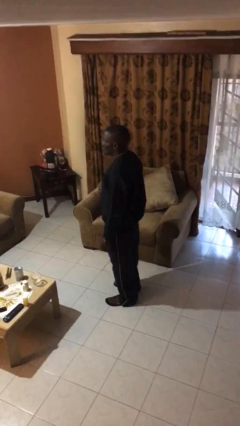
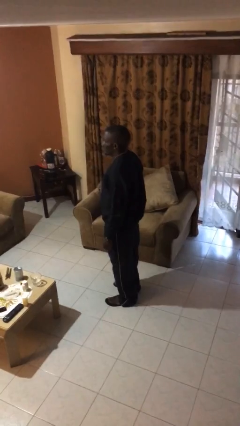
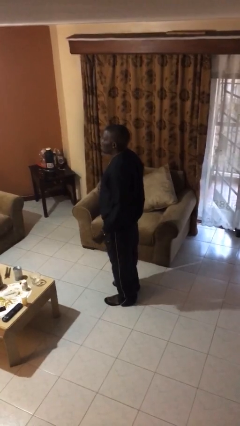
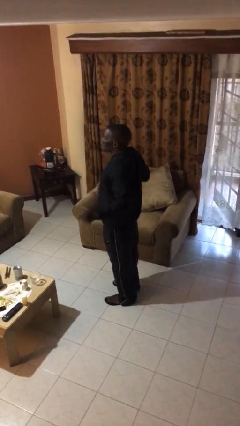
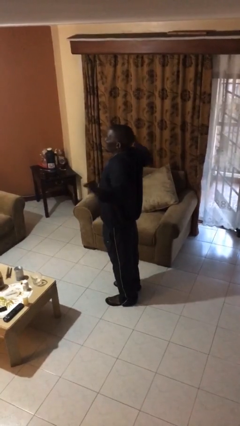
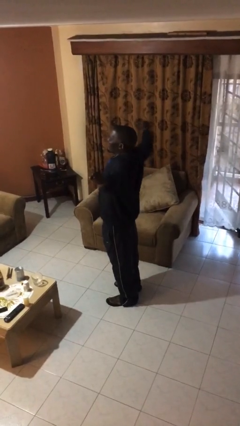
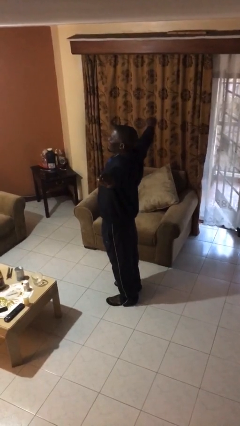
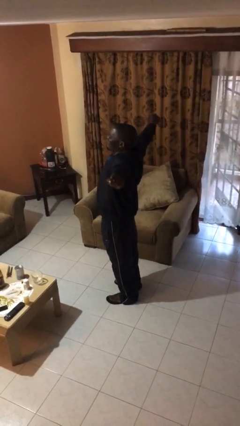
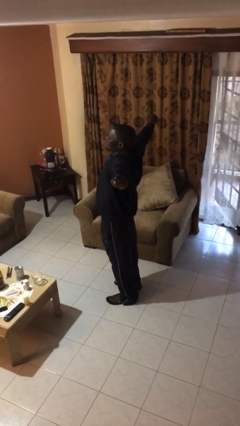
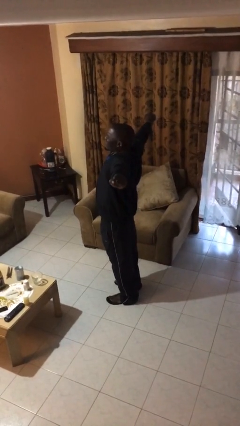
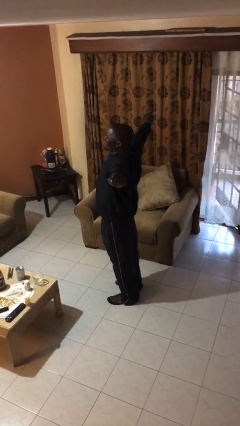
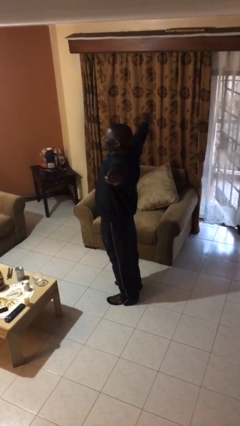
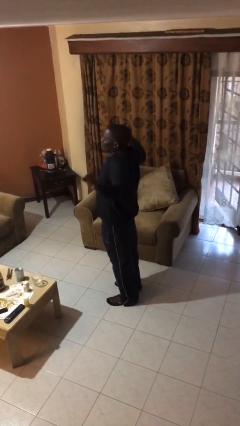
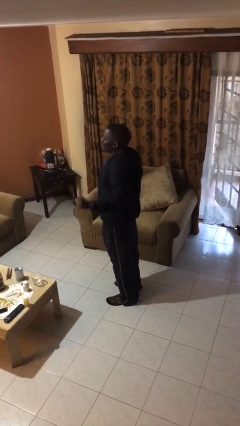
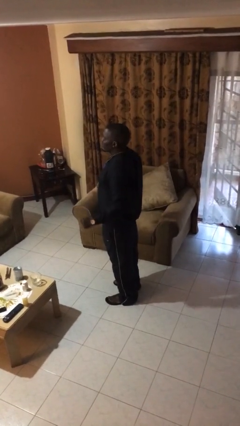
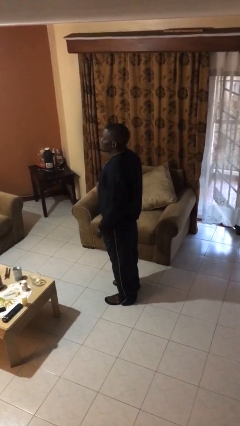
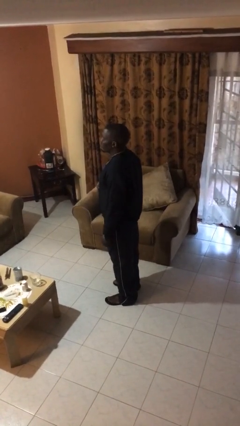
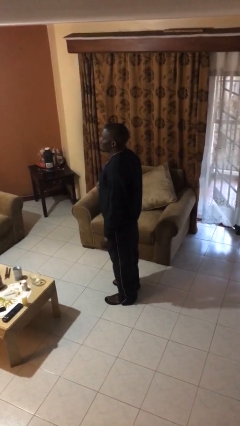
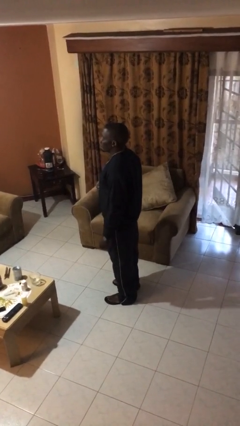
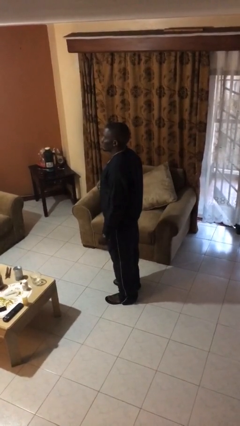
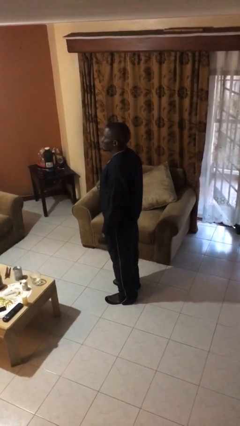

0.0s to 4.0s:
person stretches arms to side

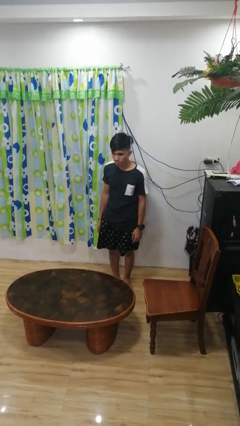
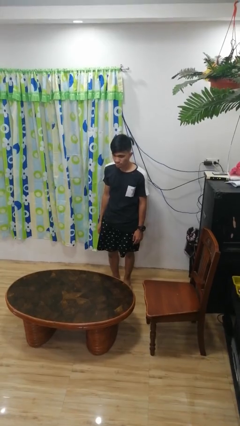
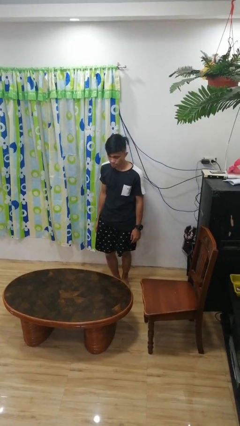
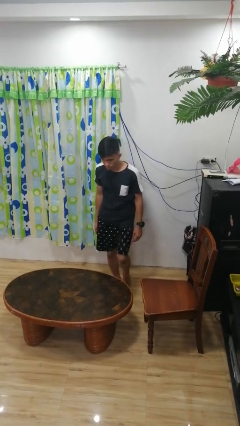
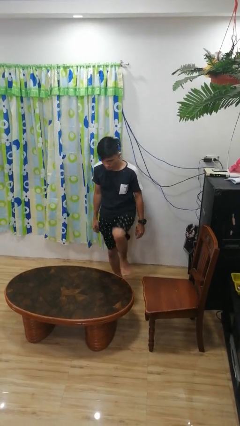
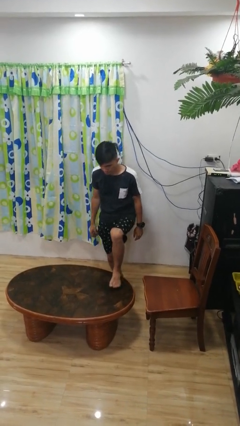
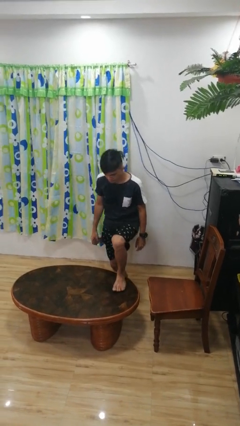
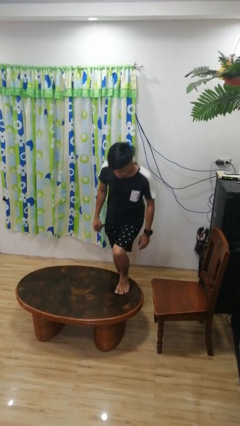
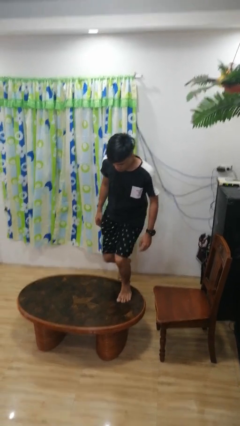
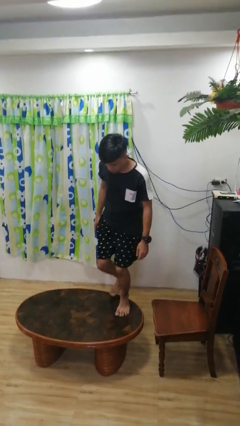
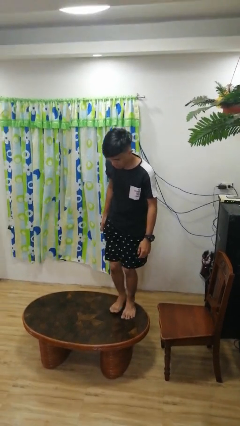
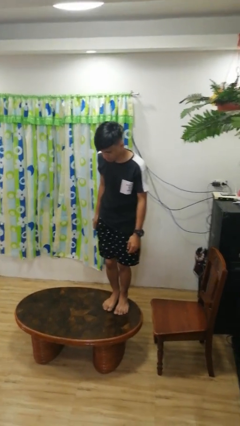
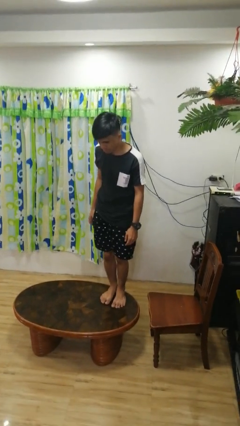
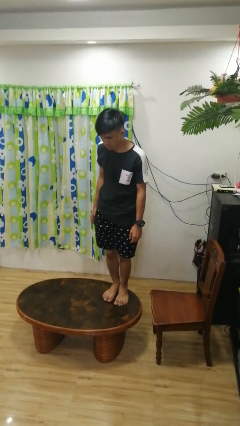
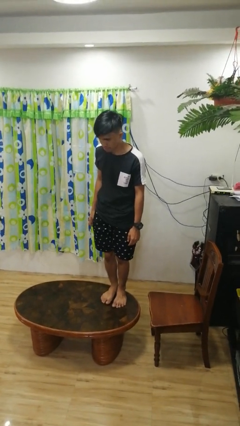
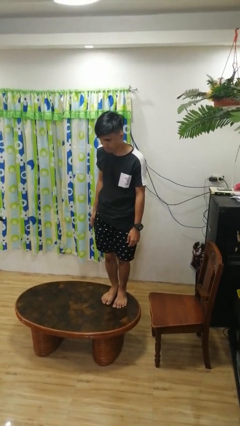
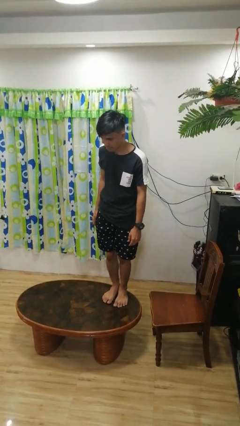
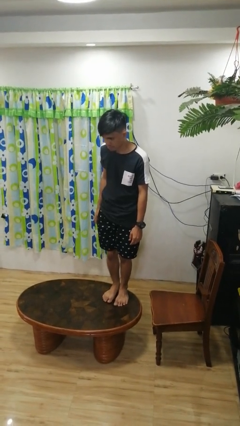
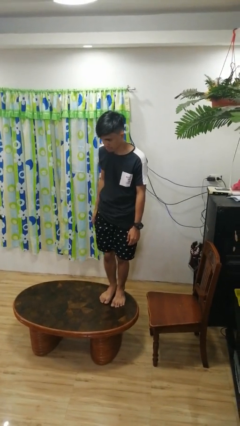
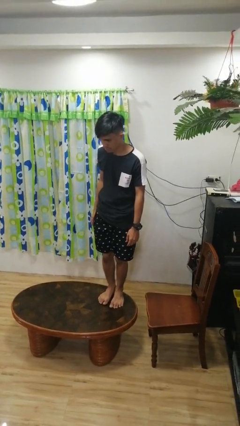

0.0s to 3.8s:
person climbs on table

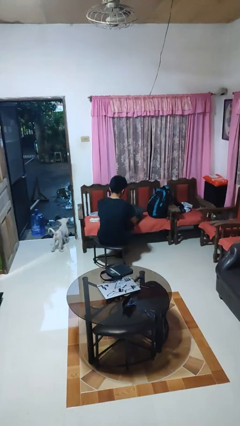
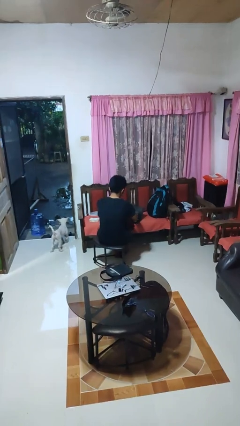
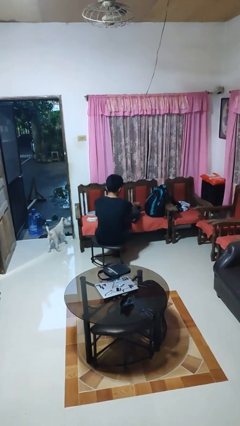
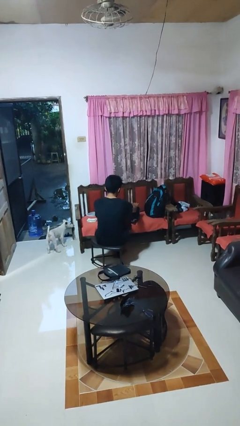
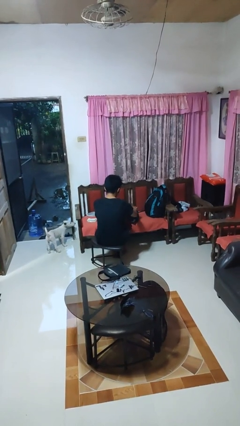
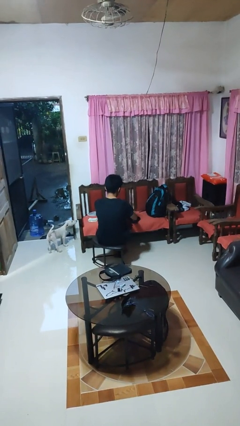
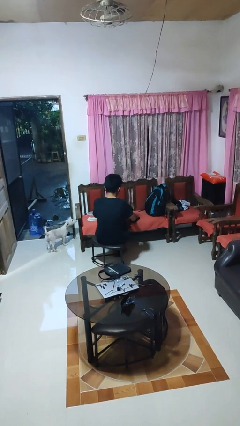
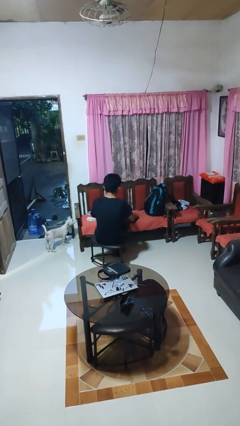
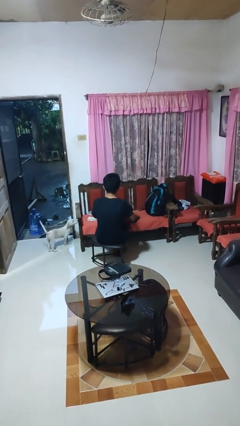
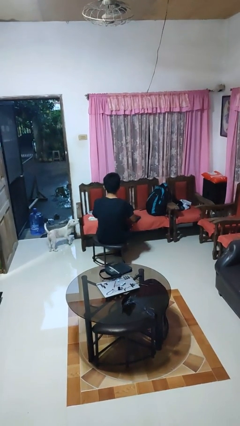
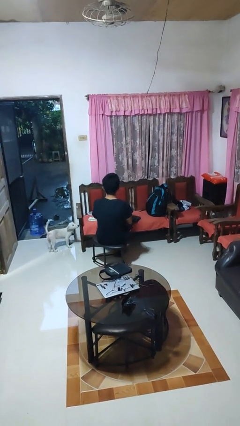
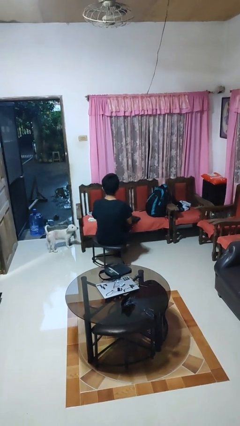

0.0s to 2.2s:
person closes laptop

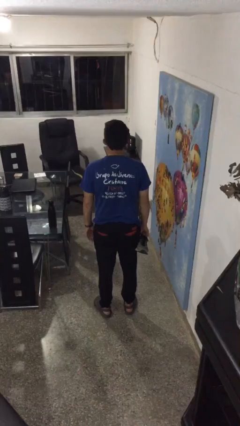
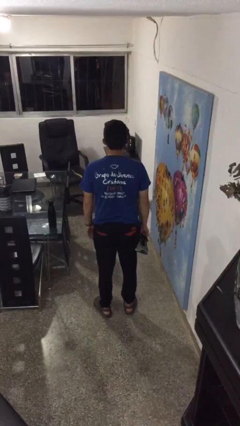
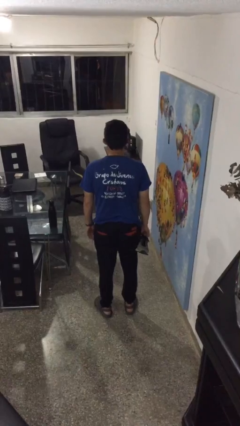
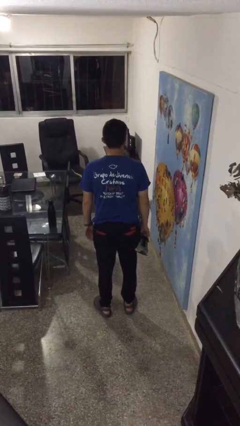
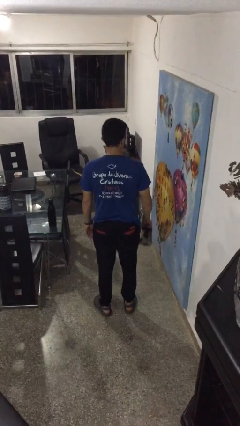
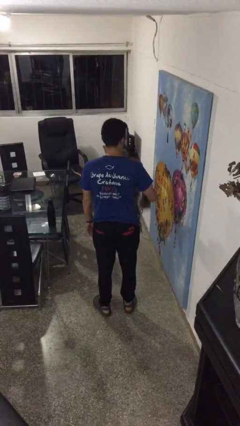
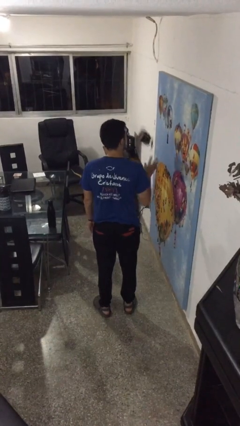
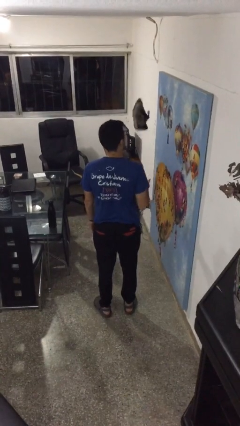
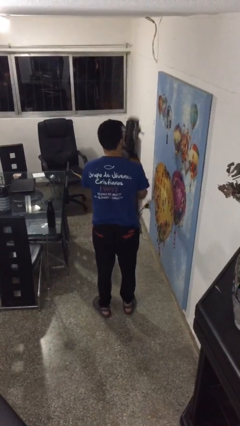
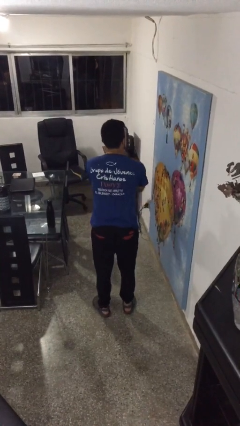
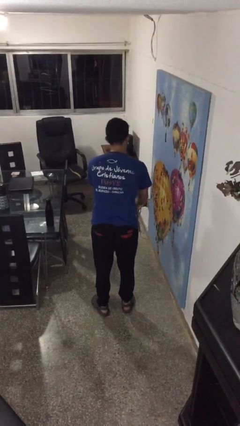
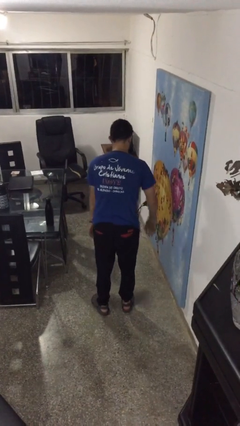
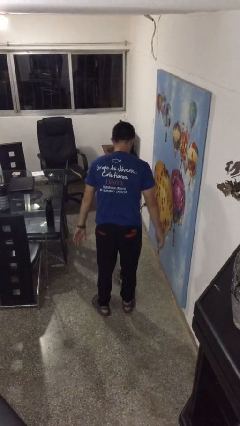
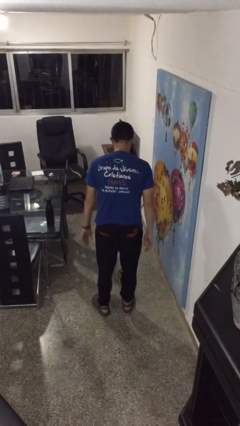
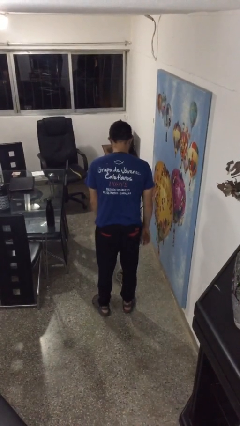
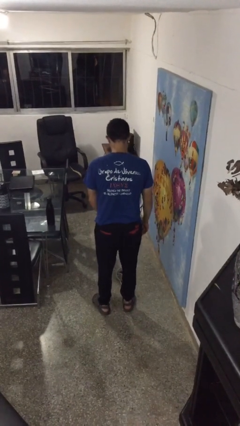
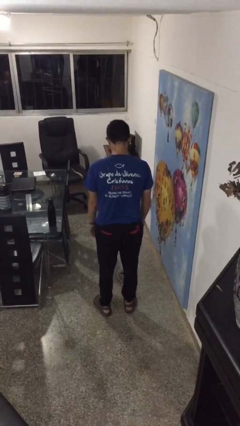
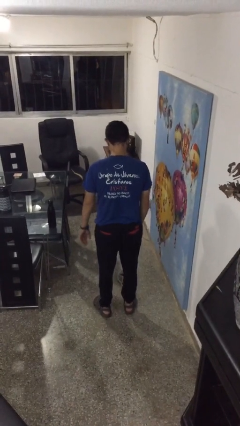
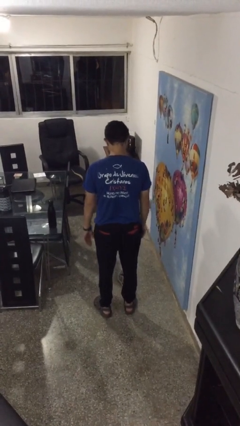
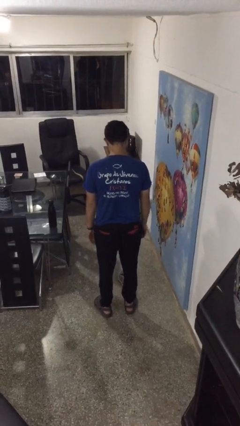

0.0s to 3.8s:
person drops object

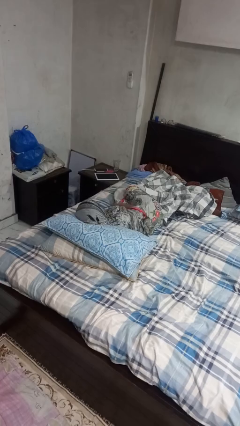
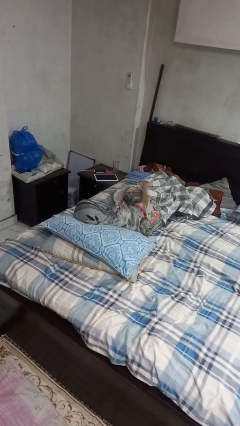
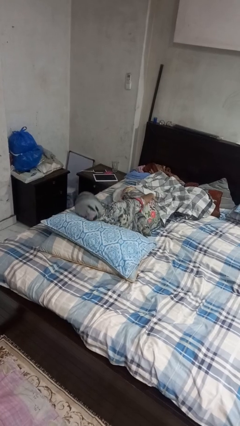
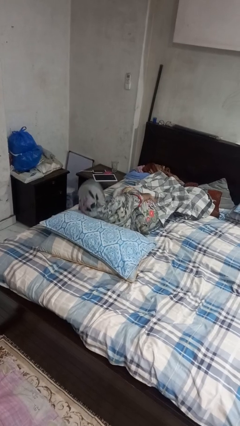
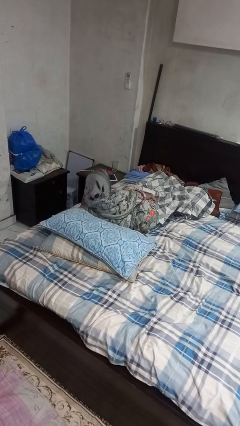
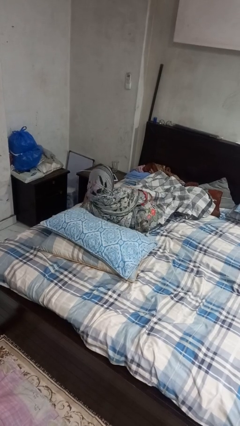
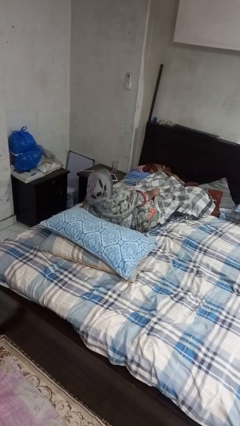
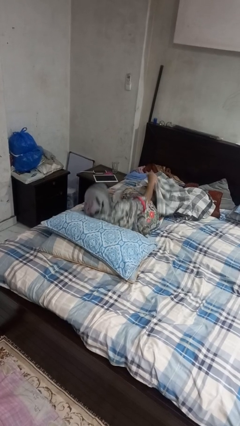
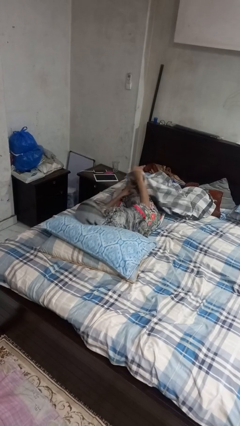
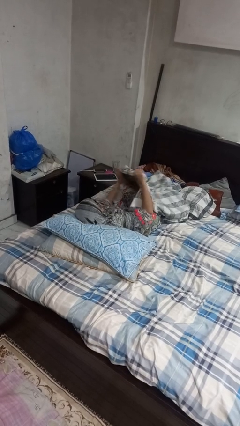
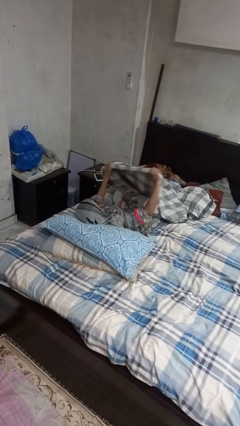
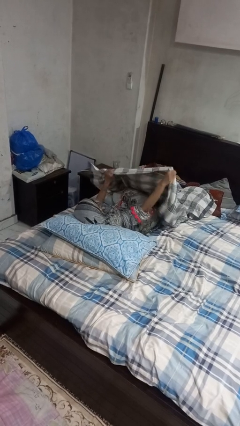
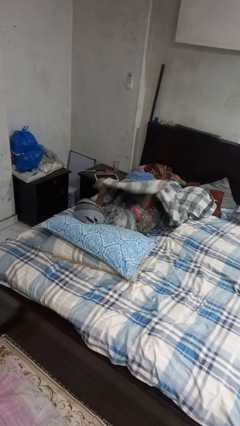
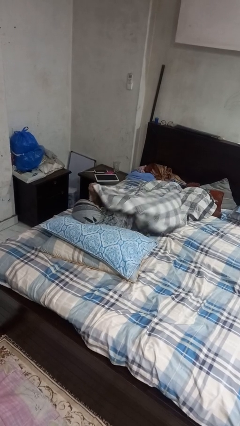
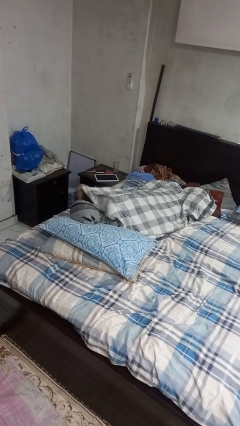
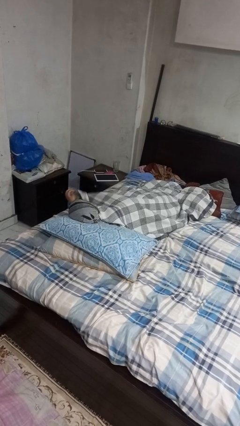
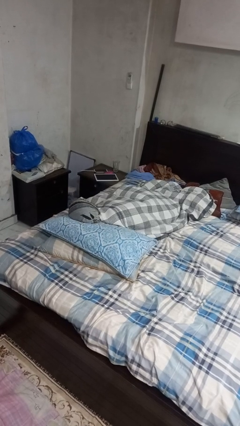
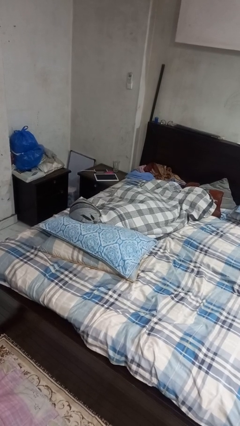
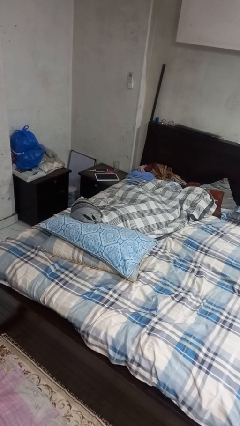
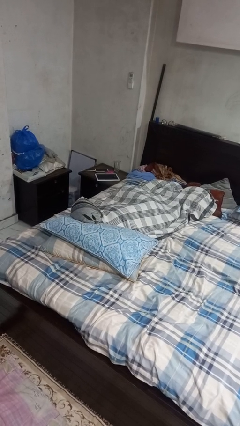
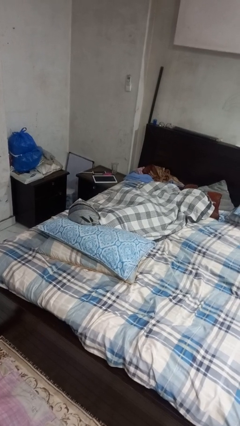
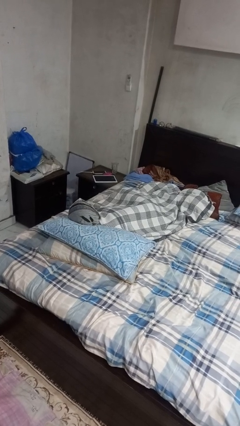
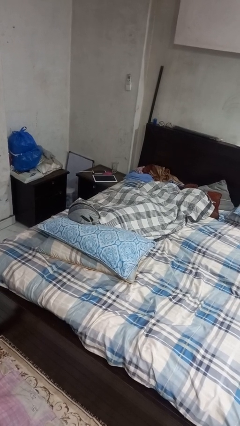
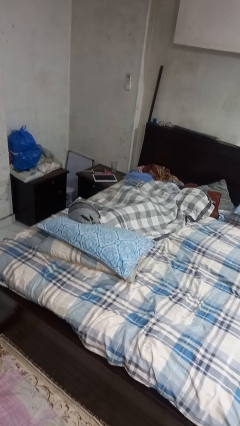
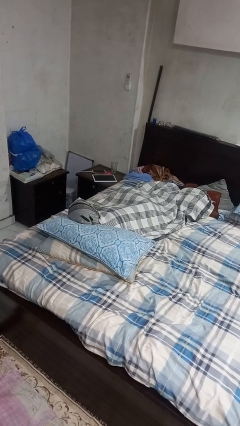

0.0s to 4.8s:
person covers with bedsheets
